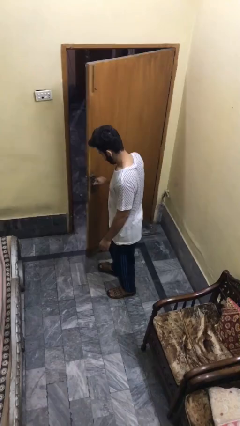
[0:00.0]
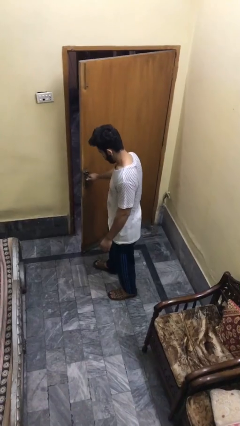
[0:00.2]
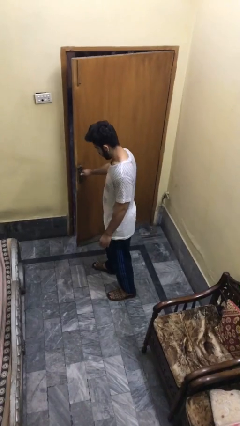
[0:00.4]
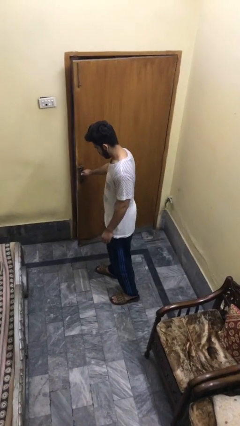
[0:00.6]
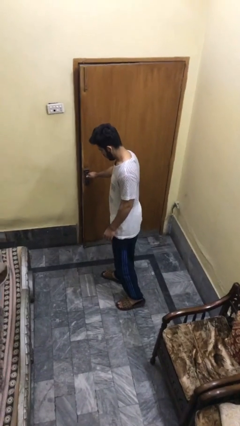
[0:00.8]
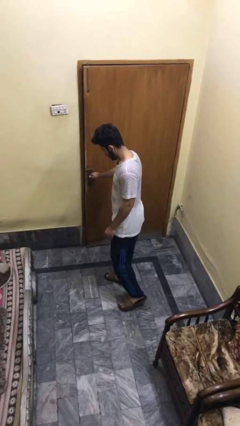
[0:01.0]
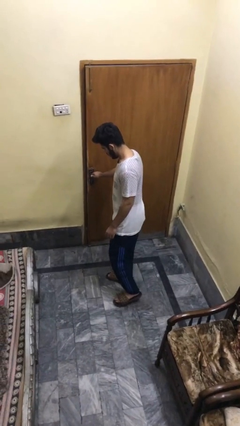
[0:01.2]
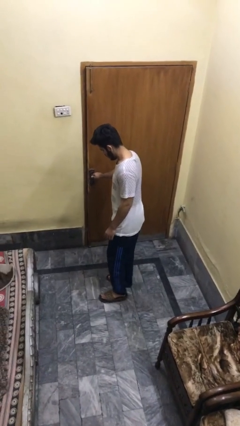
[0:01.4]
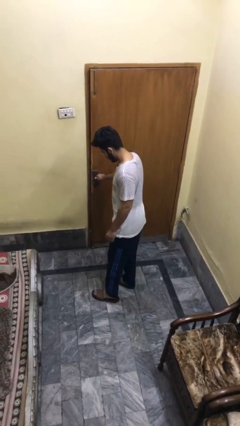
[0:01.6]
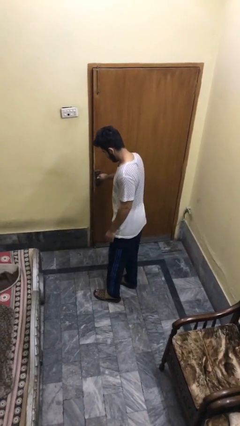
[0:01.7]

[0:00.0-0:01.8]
person closes facility door

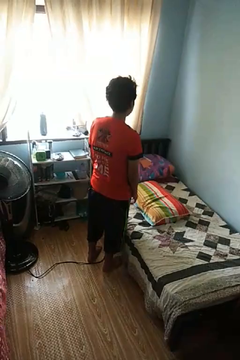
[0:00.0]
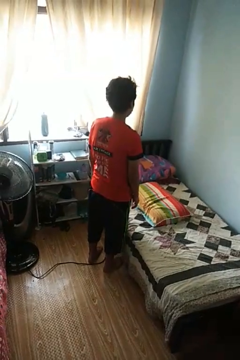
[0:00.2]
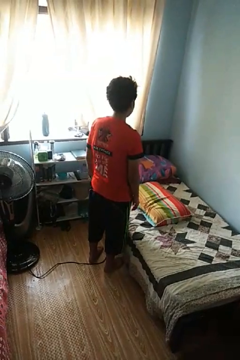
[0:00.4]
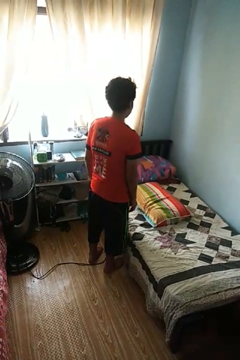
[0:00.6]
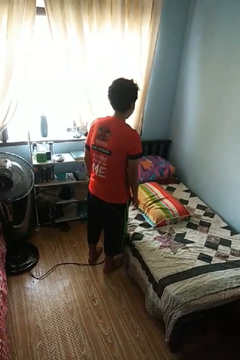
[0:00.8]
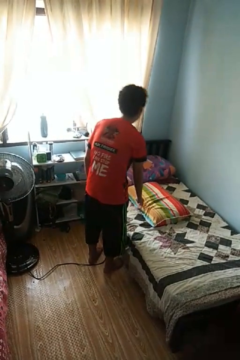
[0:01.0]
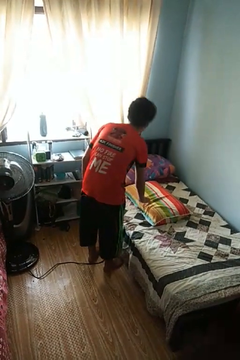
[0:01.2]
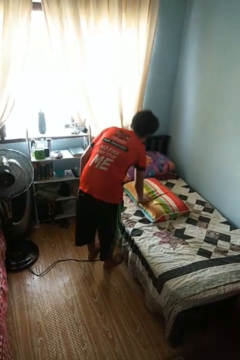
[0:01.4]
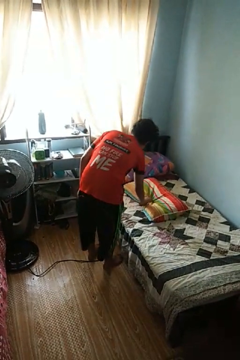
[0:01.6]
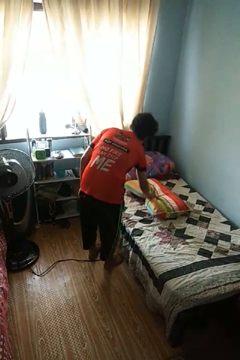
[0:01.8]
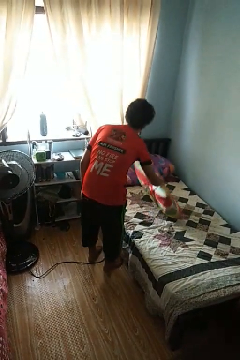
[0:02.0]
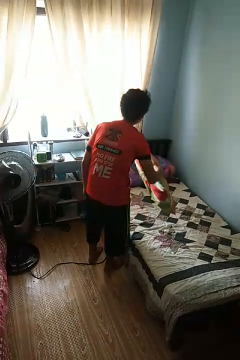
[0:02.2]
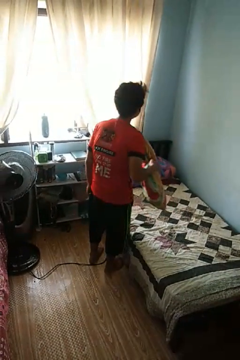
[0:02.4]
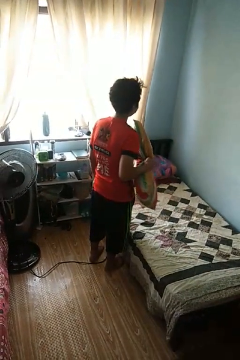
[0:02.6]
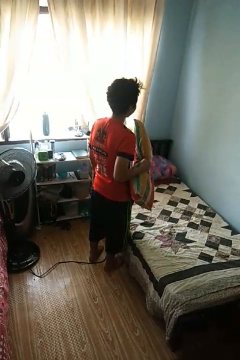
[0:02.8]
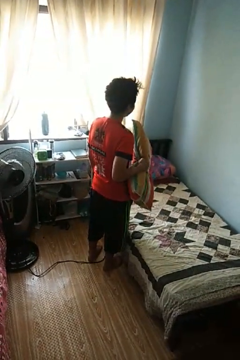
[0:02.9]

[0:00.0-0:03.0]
person picks up object from bed

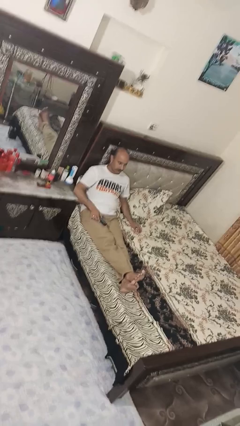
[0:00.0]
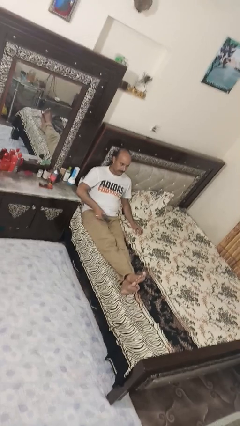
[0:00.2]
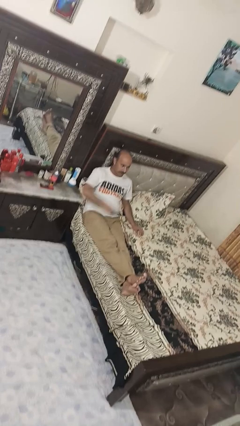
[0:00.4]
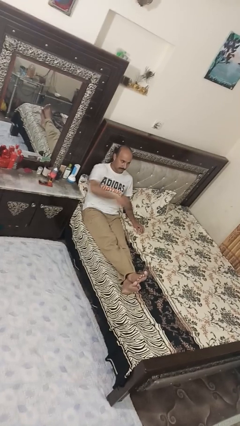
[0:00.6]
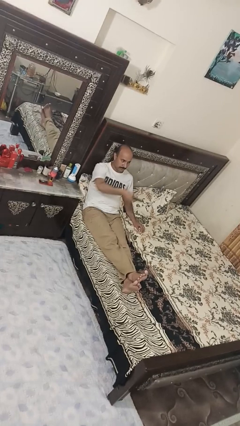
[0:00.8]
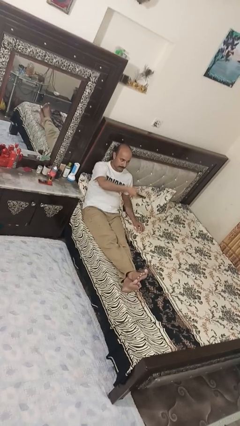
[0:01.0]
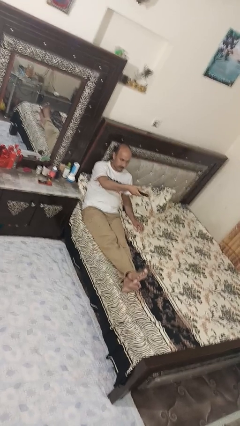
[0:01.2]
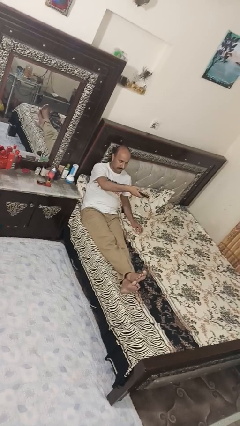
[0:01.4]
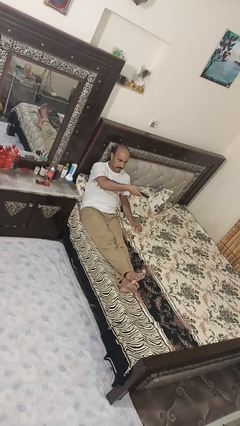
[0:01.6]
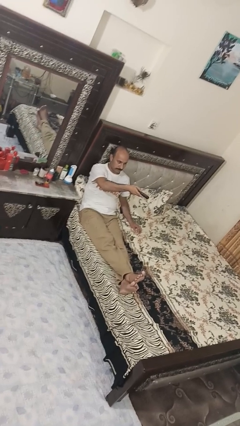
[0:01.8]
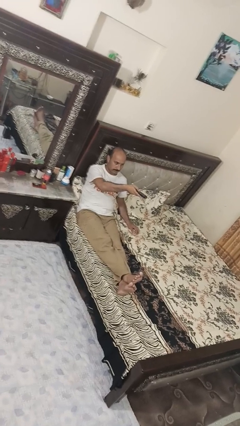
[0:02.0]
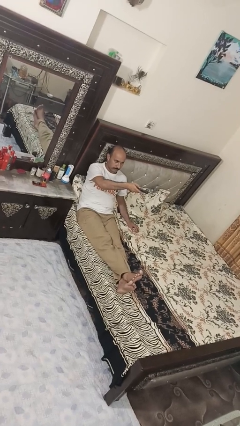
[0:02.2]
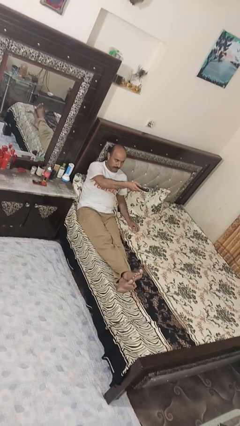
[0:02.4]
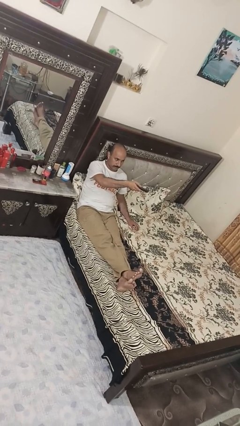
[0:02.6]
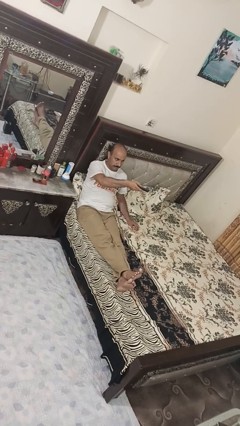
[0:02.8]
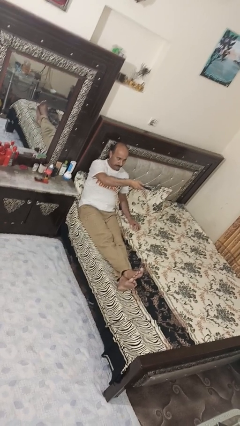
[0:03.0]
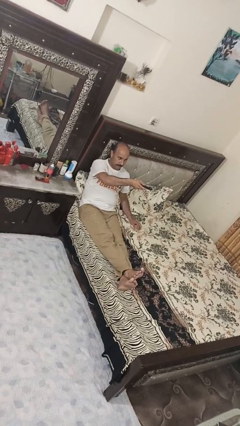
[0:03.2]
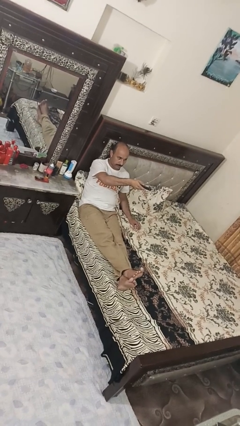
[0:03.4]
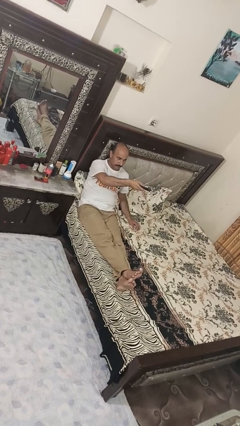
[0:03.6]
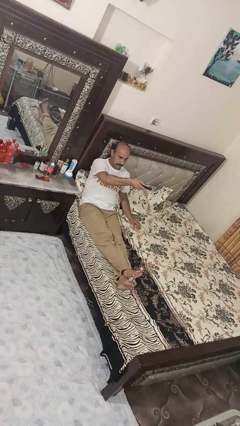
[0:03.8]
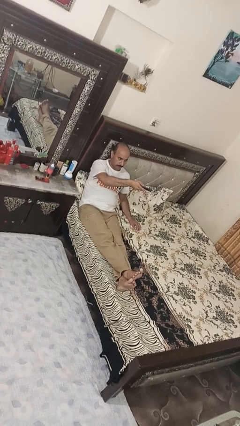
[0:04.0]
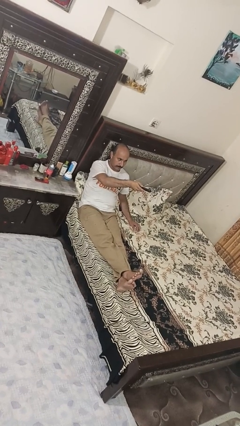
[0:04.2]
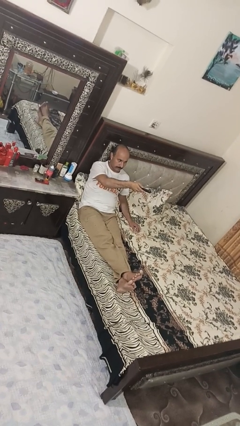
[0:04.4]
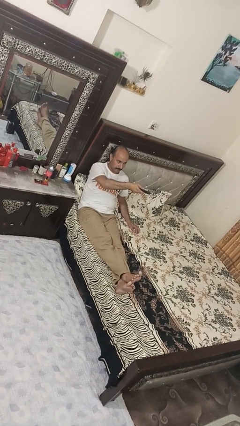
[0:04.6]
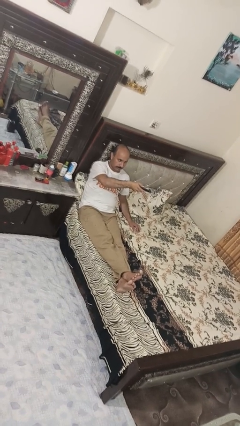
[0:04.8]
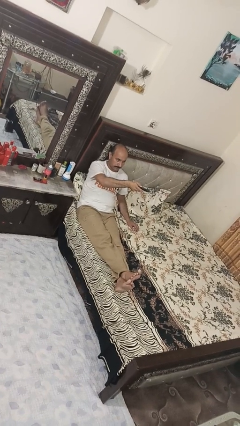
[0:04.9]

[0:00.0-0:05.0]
person uses television remote

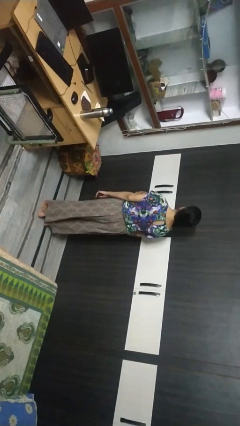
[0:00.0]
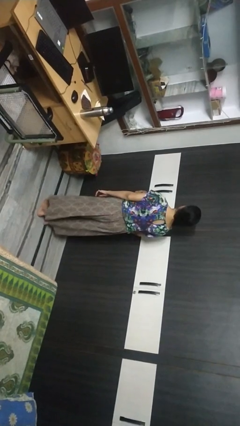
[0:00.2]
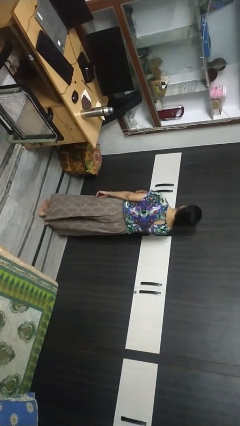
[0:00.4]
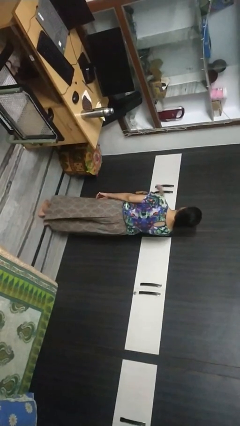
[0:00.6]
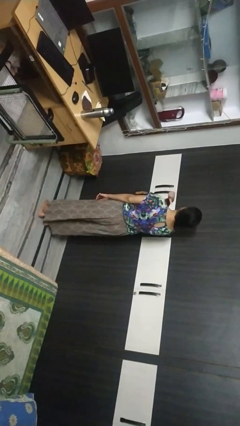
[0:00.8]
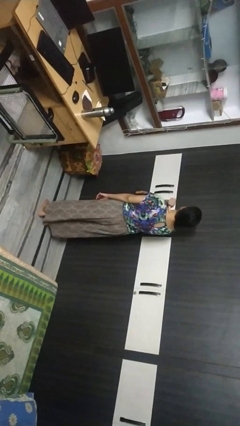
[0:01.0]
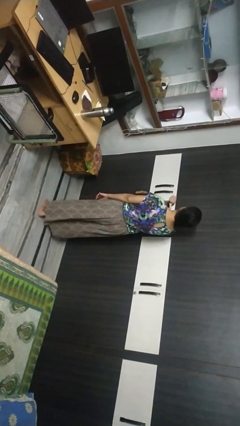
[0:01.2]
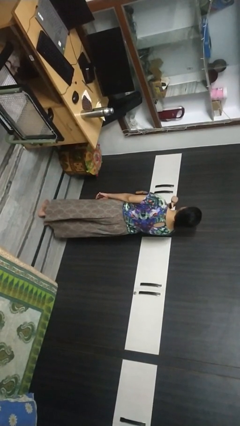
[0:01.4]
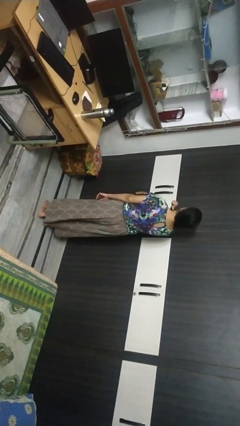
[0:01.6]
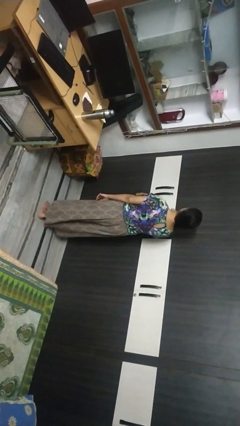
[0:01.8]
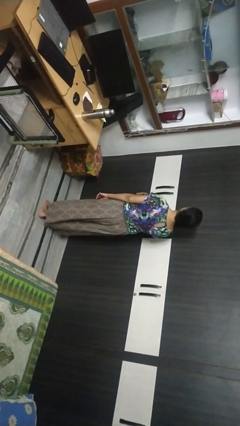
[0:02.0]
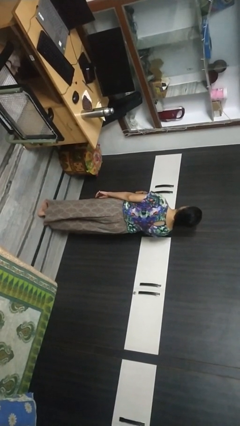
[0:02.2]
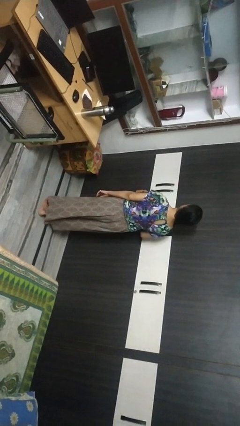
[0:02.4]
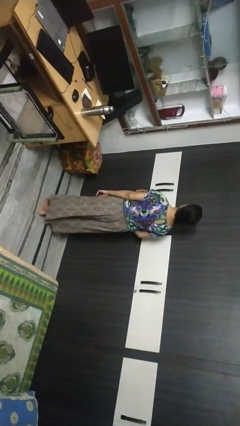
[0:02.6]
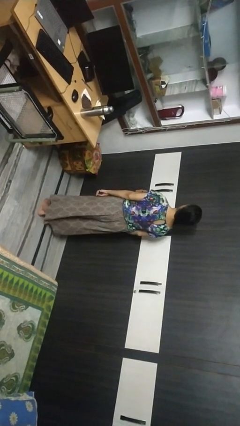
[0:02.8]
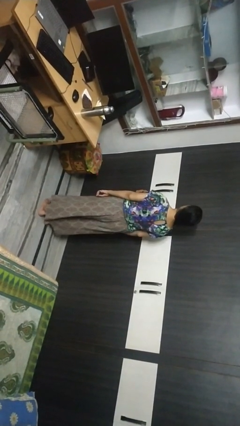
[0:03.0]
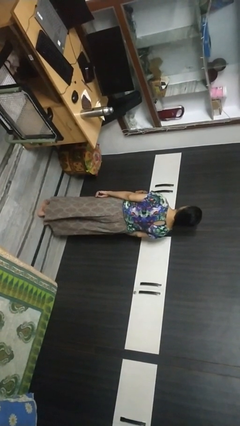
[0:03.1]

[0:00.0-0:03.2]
person gestures cut

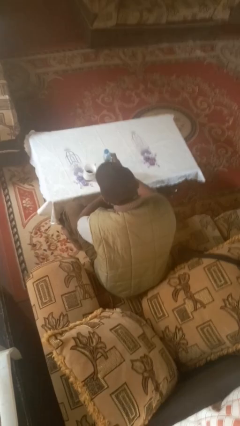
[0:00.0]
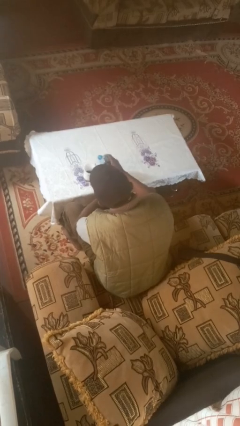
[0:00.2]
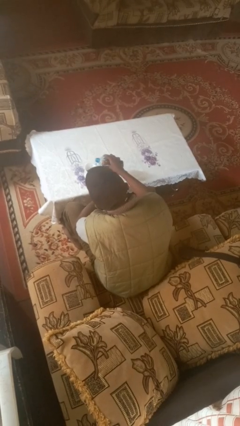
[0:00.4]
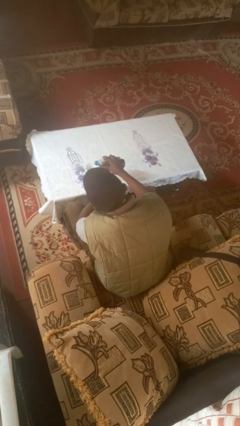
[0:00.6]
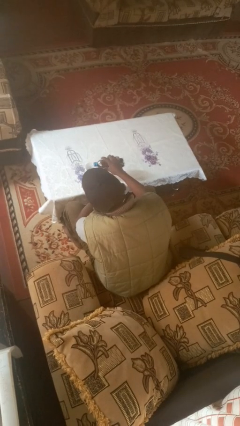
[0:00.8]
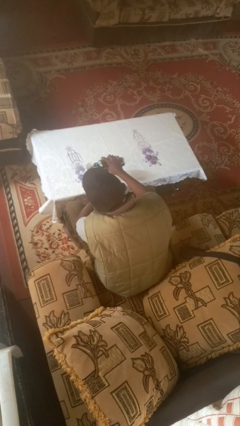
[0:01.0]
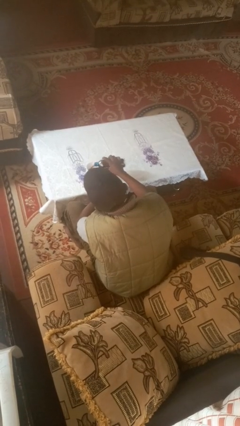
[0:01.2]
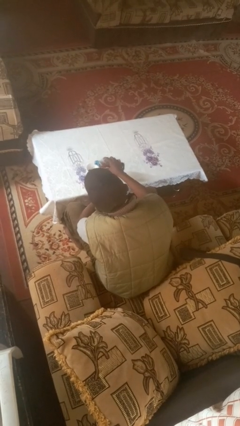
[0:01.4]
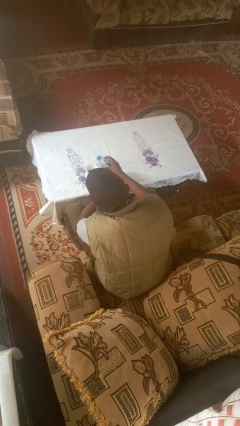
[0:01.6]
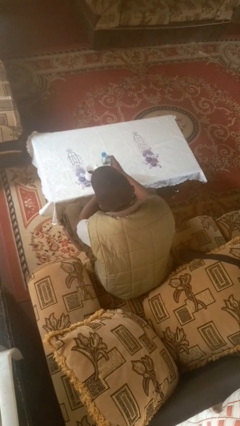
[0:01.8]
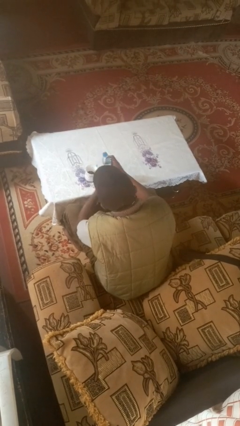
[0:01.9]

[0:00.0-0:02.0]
person pours liquid into cup

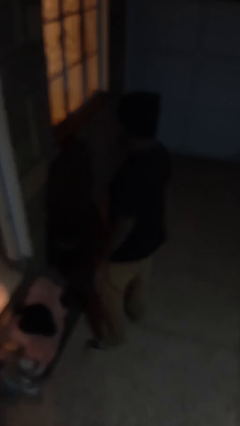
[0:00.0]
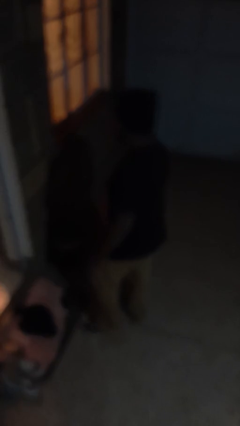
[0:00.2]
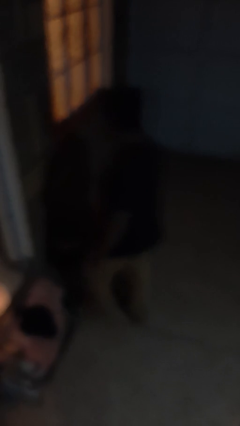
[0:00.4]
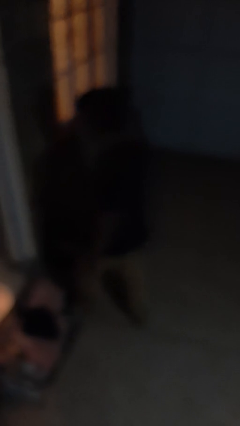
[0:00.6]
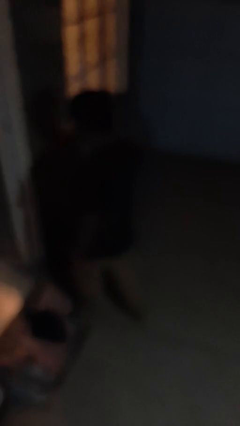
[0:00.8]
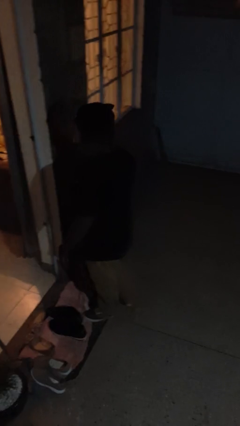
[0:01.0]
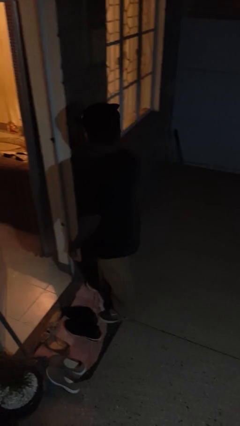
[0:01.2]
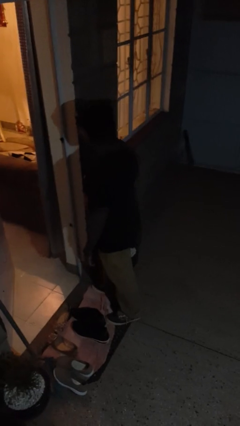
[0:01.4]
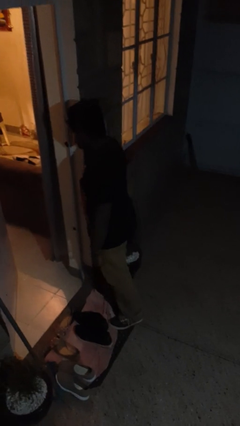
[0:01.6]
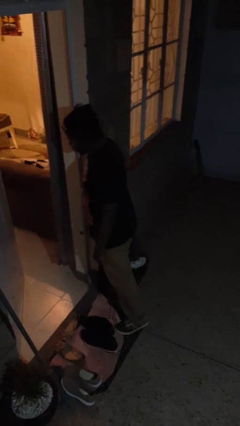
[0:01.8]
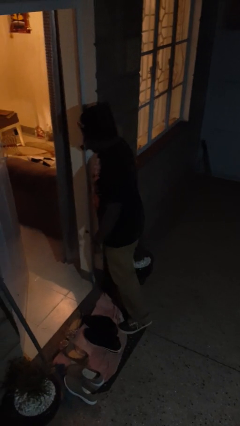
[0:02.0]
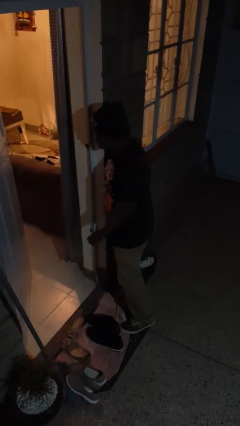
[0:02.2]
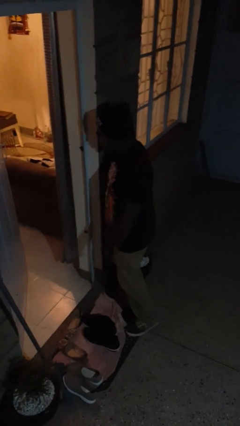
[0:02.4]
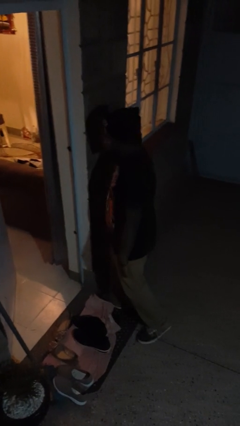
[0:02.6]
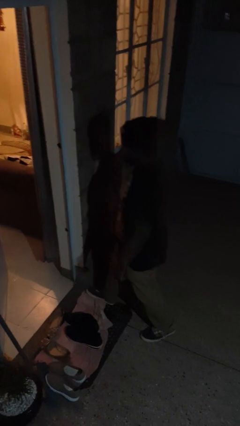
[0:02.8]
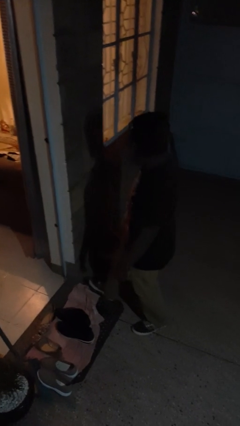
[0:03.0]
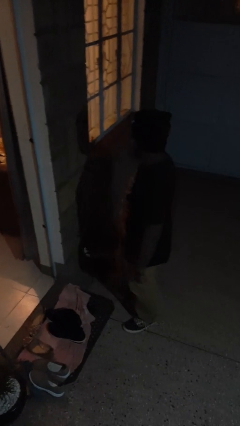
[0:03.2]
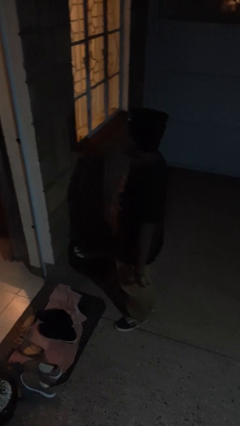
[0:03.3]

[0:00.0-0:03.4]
person bumps into wall
